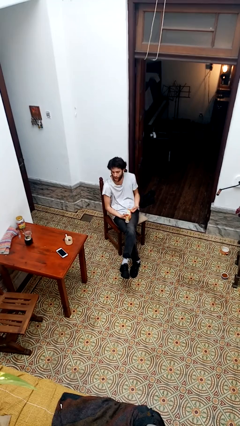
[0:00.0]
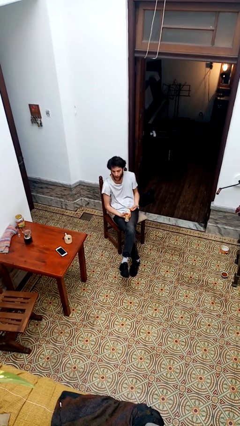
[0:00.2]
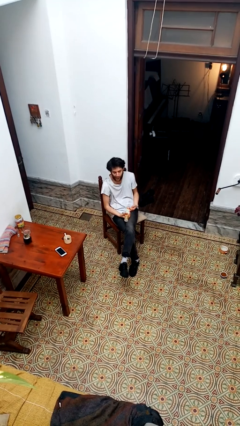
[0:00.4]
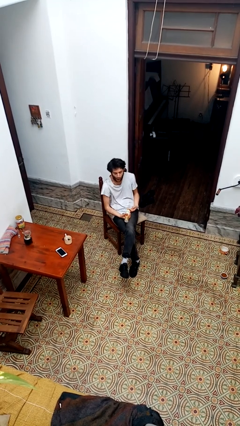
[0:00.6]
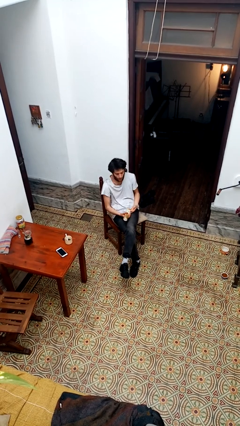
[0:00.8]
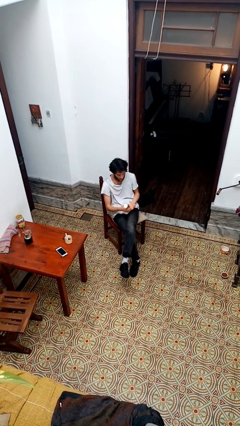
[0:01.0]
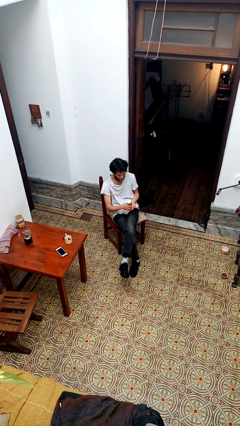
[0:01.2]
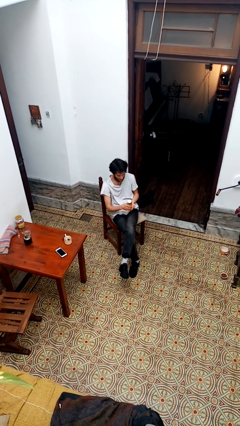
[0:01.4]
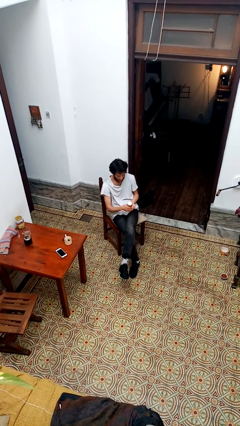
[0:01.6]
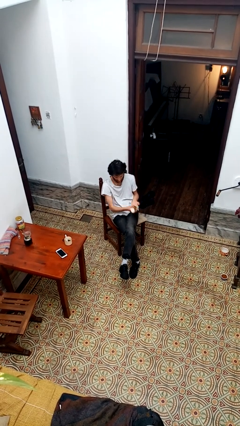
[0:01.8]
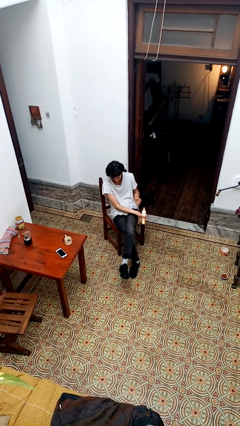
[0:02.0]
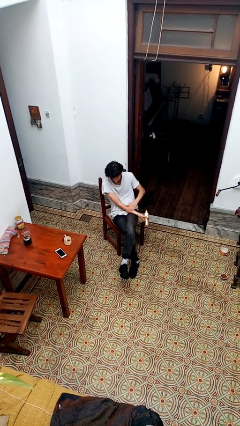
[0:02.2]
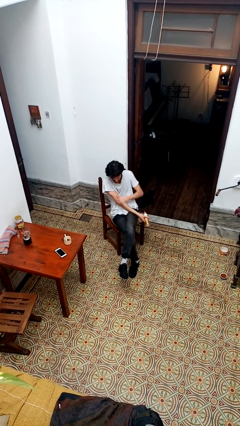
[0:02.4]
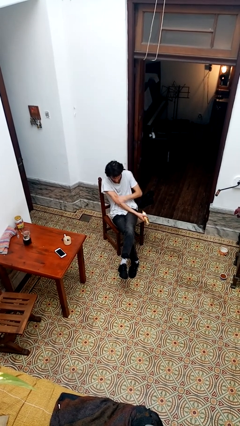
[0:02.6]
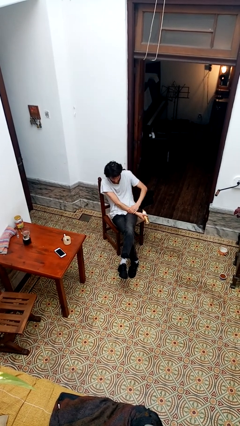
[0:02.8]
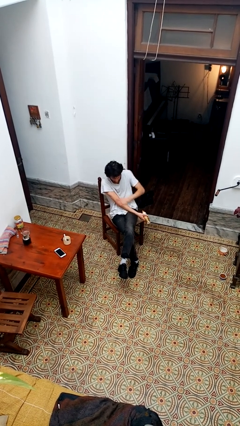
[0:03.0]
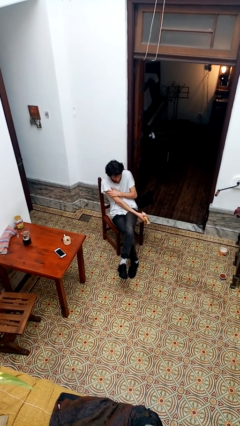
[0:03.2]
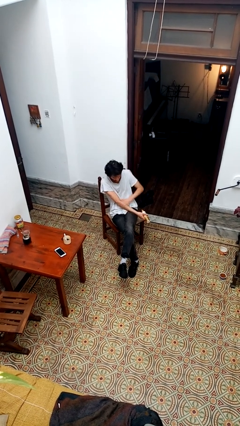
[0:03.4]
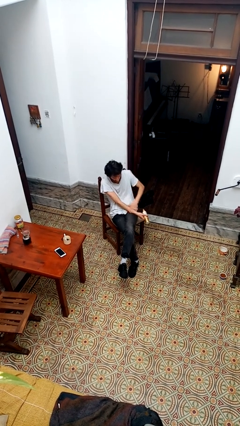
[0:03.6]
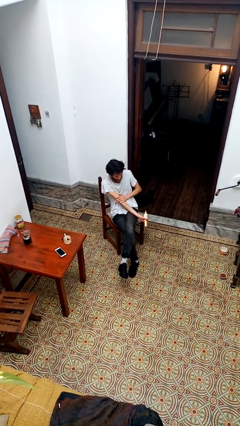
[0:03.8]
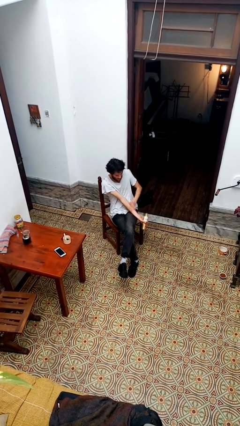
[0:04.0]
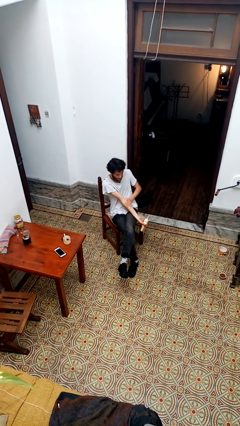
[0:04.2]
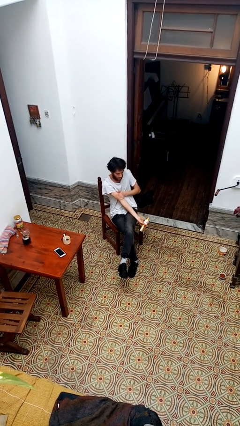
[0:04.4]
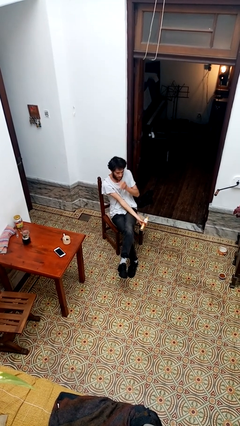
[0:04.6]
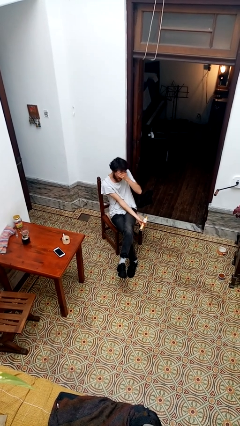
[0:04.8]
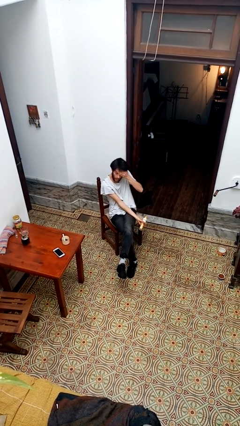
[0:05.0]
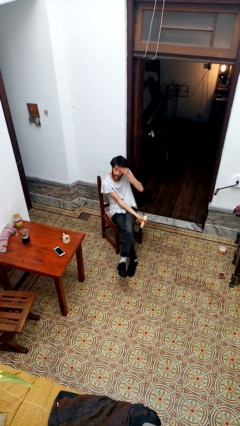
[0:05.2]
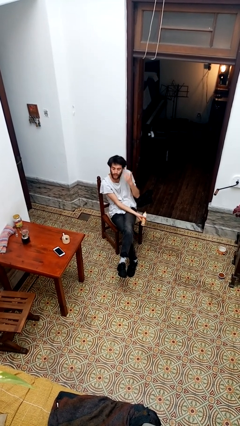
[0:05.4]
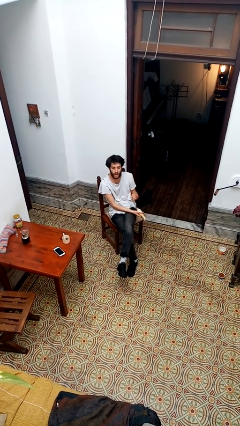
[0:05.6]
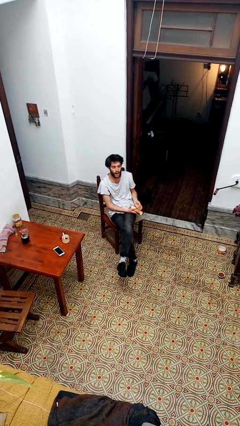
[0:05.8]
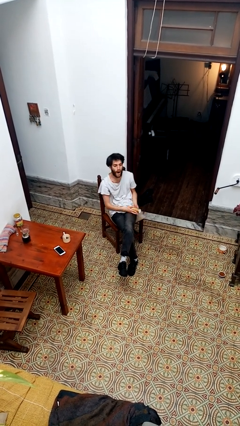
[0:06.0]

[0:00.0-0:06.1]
person applies sunscreen

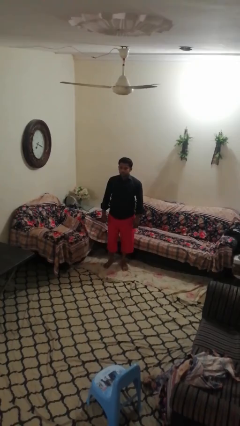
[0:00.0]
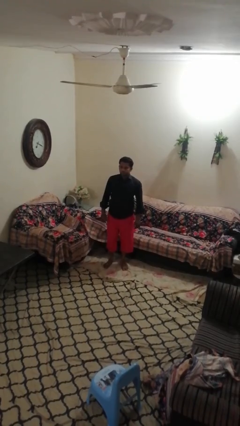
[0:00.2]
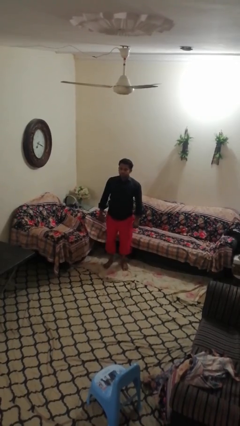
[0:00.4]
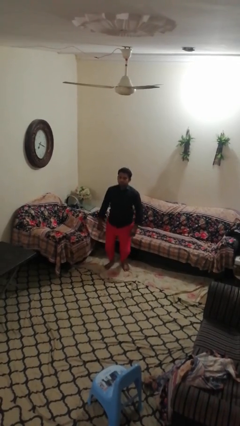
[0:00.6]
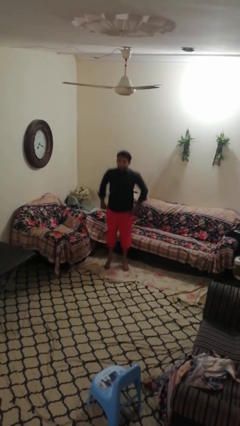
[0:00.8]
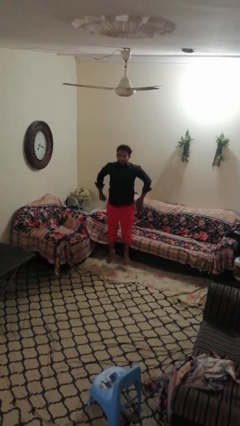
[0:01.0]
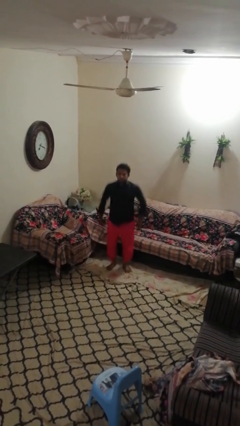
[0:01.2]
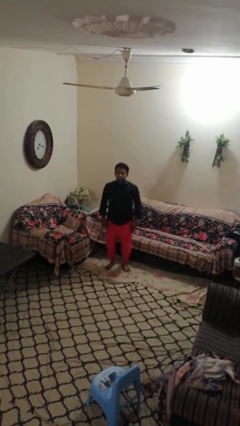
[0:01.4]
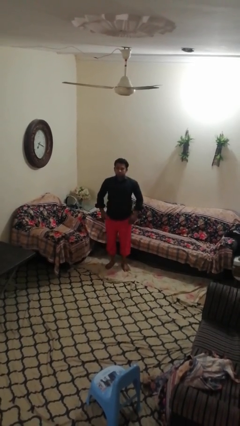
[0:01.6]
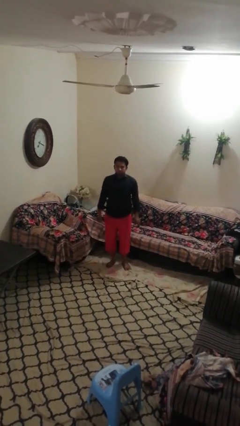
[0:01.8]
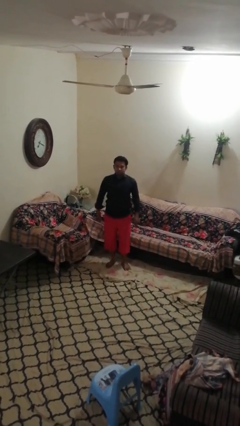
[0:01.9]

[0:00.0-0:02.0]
person jumps

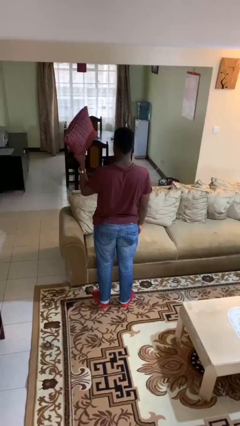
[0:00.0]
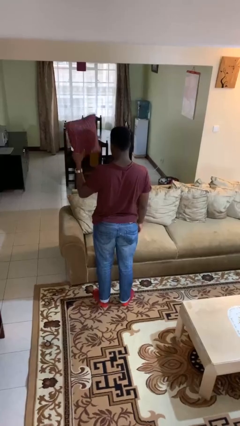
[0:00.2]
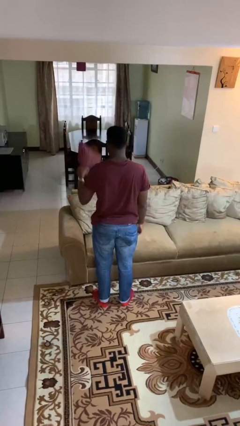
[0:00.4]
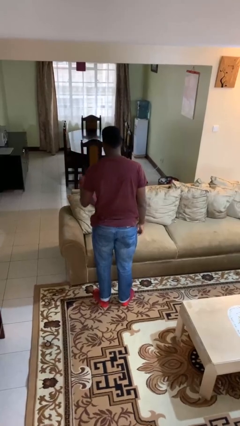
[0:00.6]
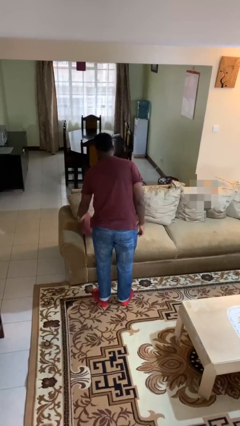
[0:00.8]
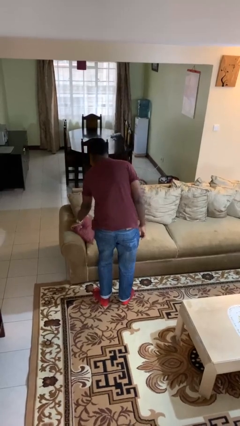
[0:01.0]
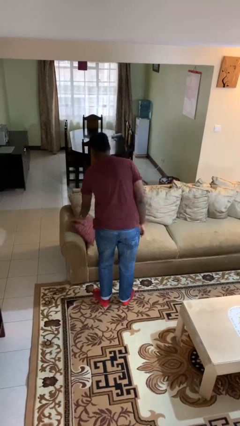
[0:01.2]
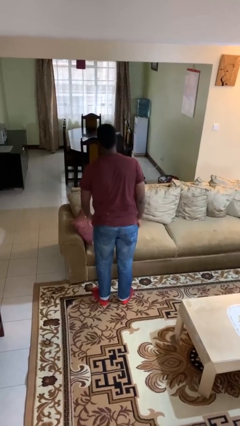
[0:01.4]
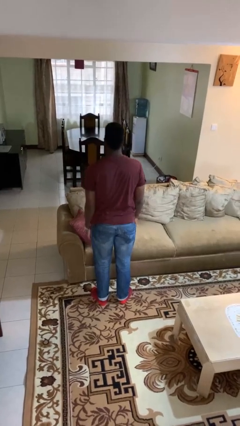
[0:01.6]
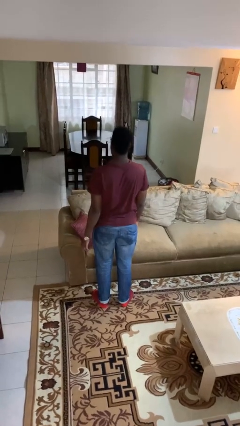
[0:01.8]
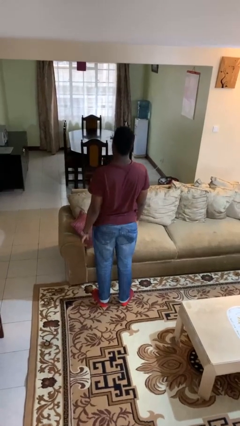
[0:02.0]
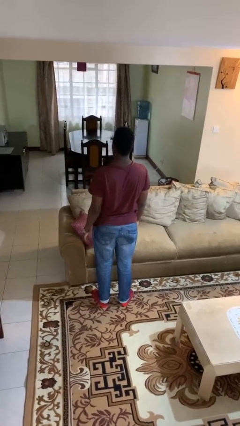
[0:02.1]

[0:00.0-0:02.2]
person puts down object on couch

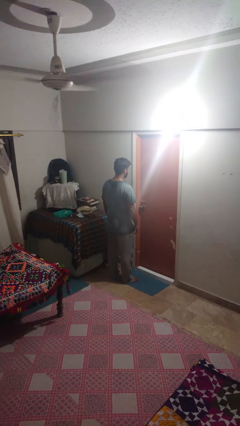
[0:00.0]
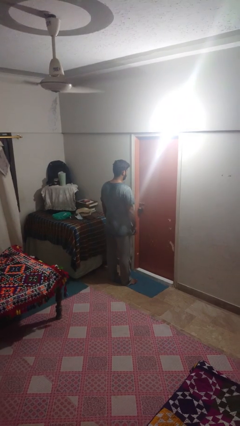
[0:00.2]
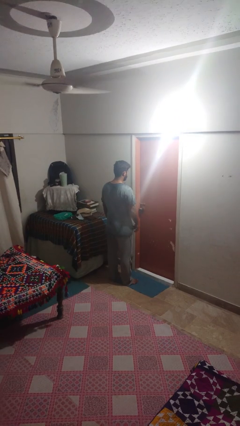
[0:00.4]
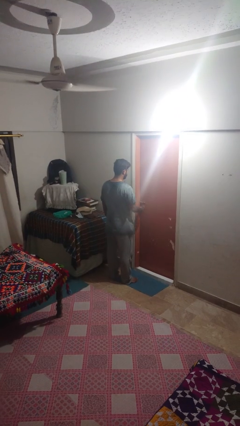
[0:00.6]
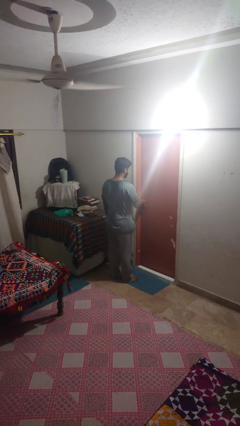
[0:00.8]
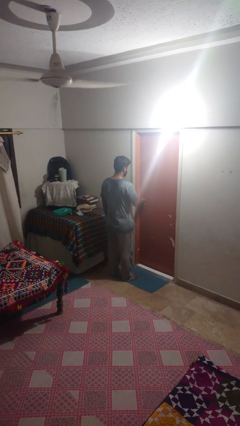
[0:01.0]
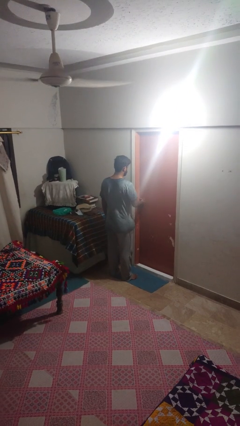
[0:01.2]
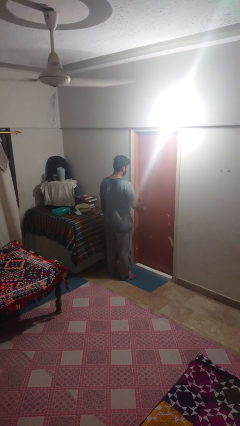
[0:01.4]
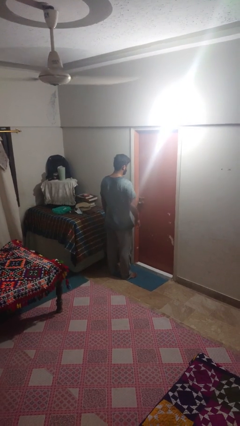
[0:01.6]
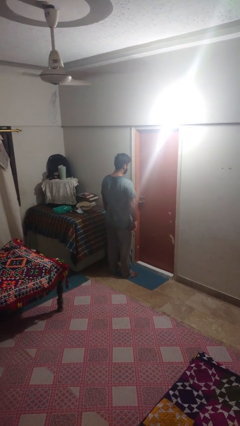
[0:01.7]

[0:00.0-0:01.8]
person unlocks door with keys

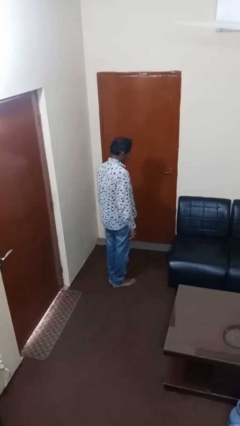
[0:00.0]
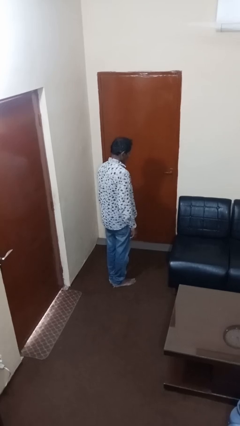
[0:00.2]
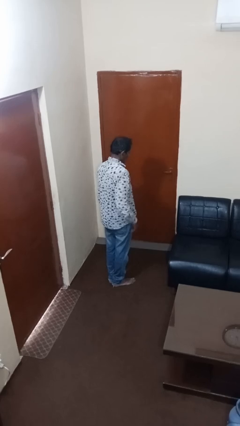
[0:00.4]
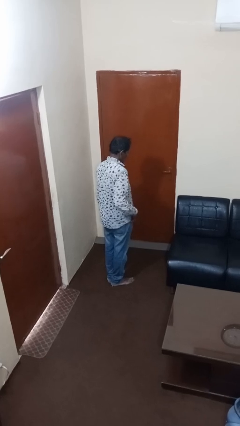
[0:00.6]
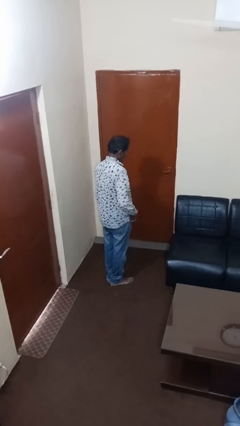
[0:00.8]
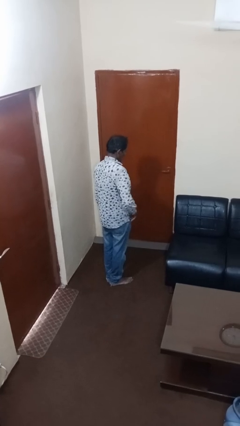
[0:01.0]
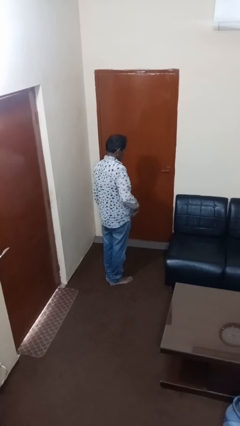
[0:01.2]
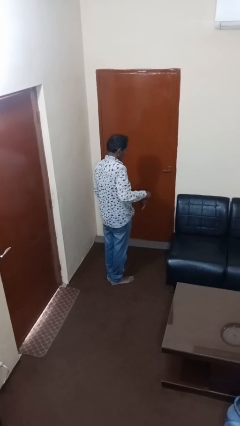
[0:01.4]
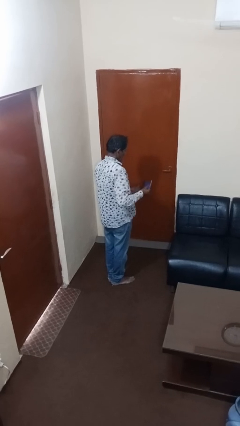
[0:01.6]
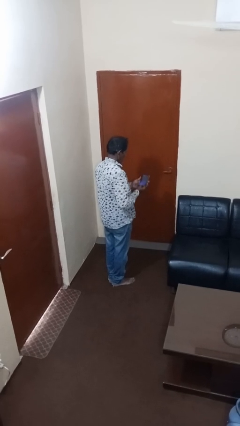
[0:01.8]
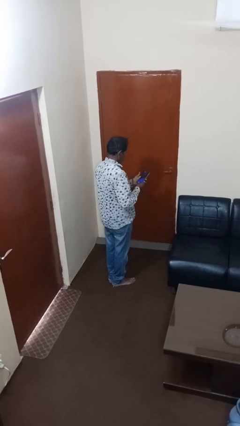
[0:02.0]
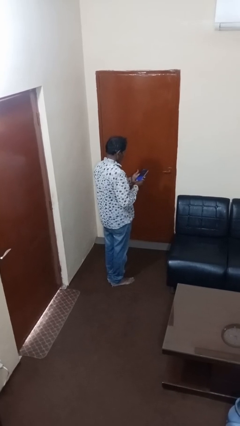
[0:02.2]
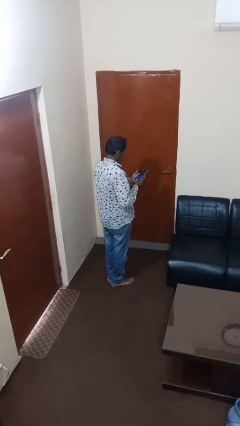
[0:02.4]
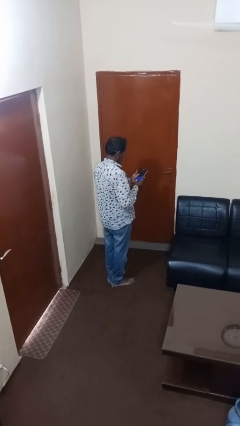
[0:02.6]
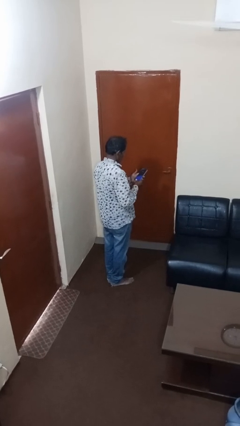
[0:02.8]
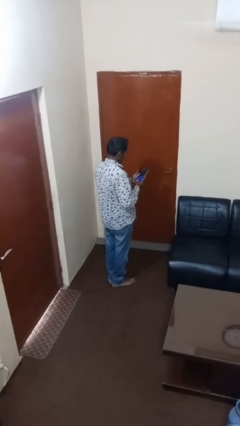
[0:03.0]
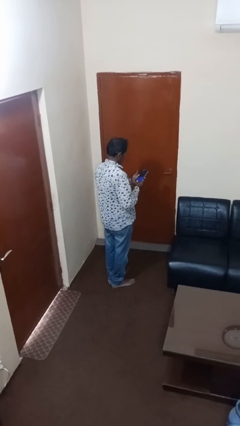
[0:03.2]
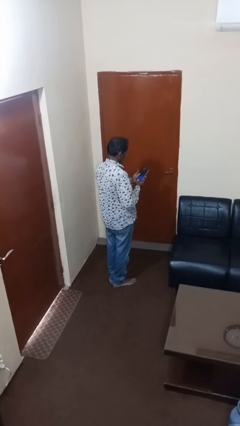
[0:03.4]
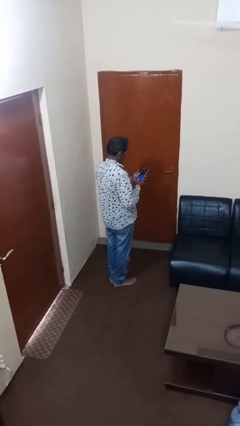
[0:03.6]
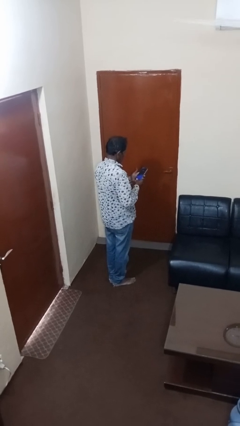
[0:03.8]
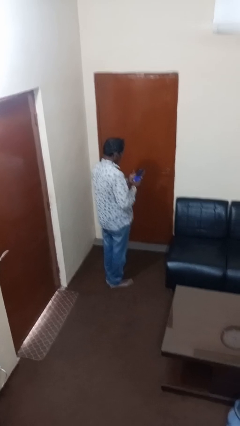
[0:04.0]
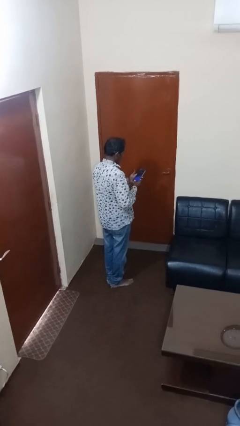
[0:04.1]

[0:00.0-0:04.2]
person takes phone from pocket

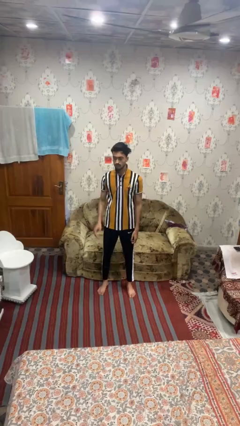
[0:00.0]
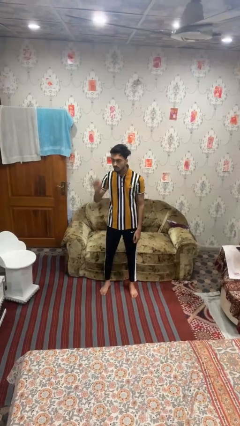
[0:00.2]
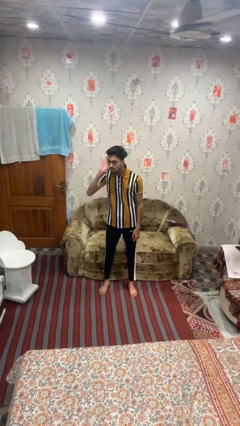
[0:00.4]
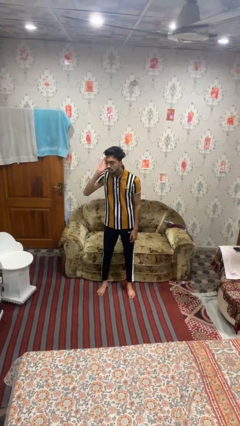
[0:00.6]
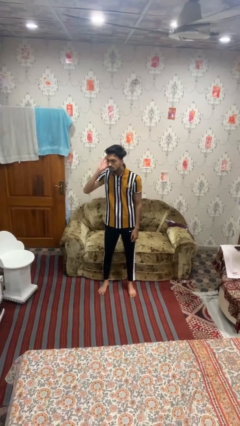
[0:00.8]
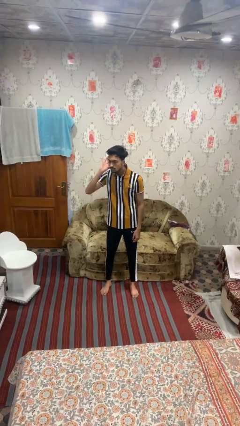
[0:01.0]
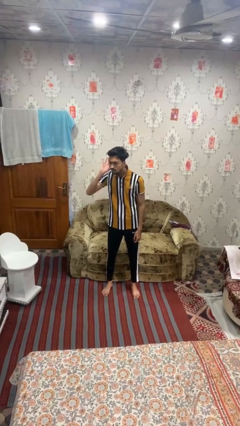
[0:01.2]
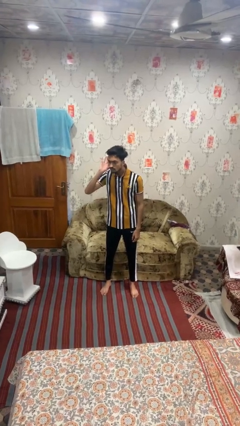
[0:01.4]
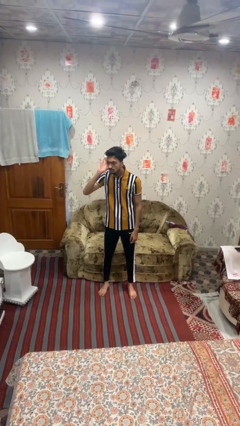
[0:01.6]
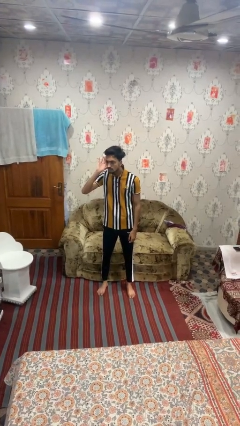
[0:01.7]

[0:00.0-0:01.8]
person gestures listen closely
